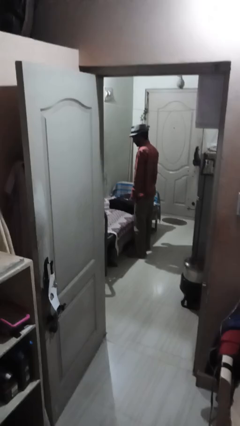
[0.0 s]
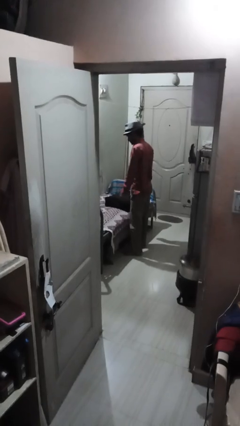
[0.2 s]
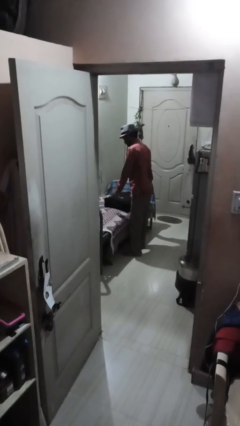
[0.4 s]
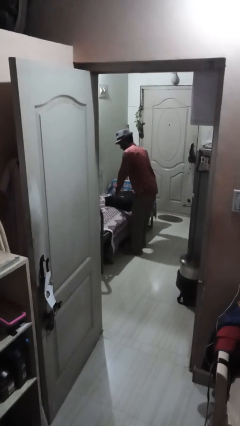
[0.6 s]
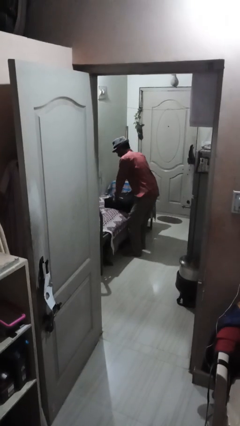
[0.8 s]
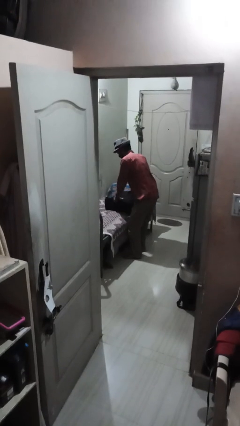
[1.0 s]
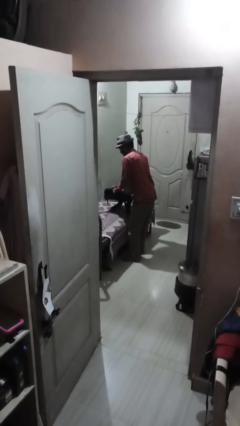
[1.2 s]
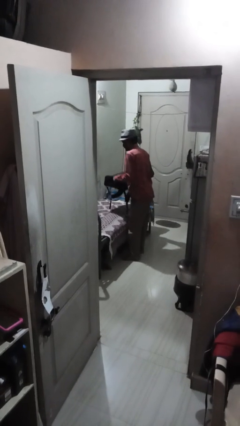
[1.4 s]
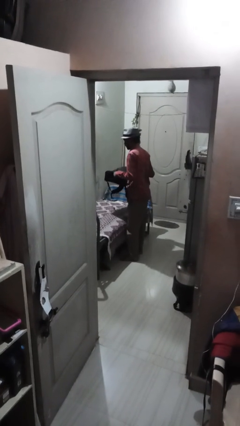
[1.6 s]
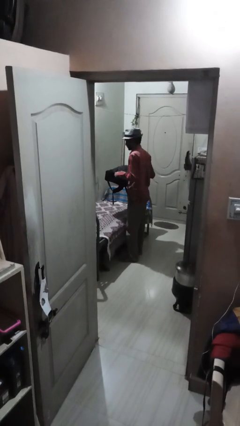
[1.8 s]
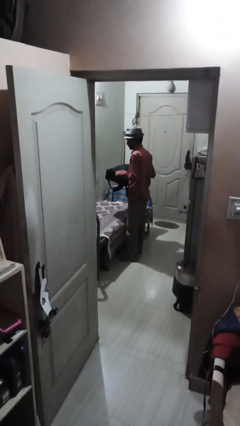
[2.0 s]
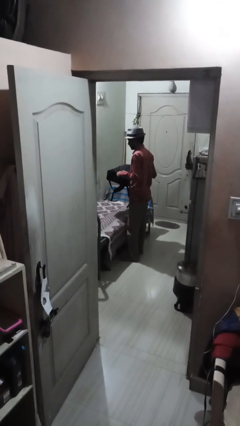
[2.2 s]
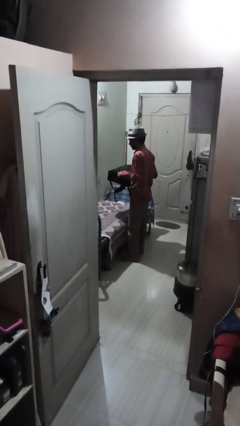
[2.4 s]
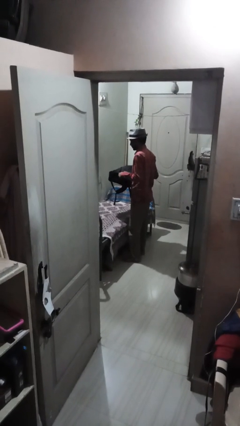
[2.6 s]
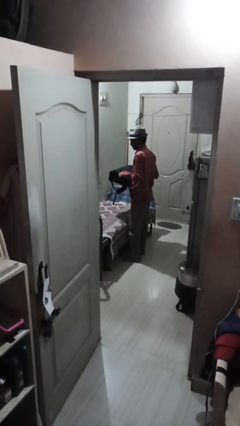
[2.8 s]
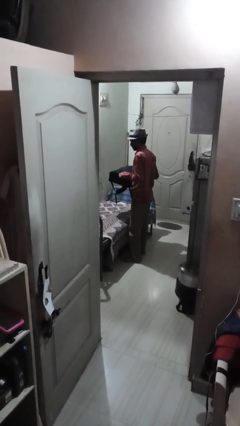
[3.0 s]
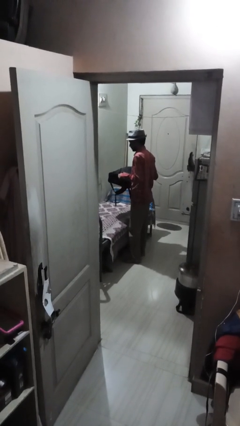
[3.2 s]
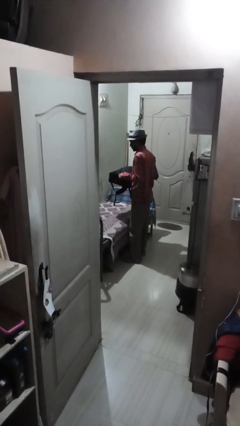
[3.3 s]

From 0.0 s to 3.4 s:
person picks up object from couch
